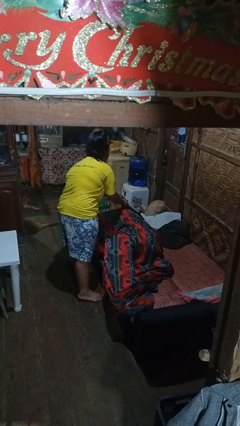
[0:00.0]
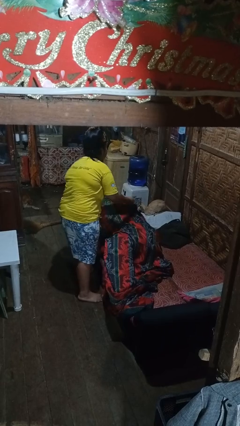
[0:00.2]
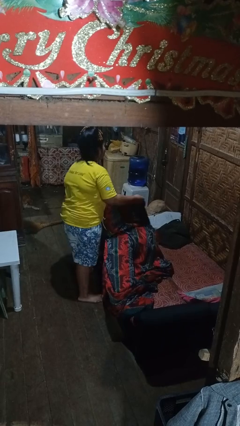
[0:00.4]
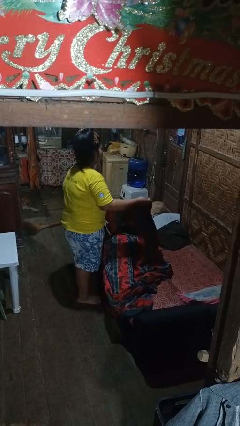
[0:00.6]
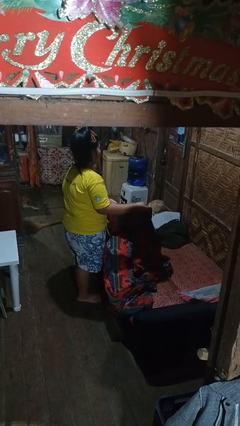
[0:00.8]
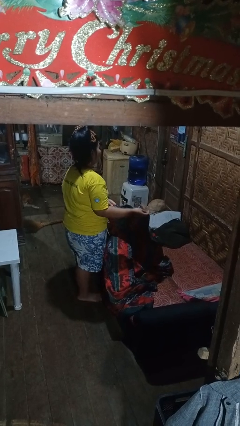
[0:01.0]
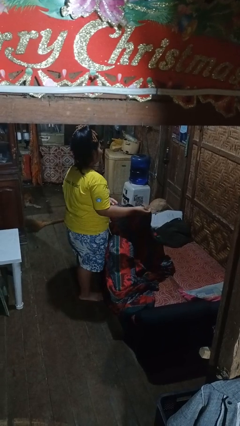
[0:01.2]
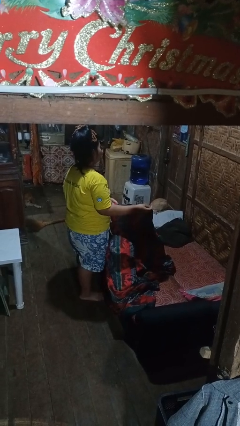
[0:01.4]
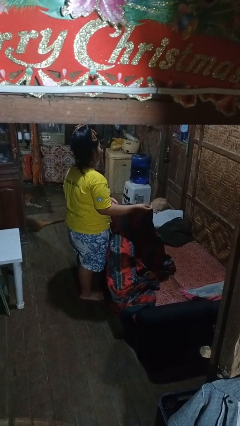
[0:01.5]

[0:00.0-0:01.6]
person uncovers friend with blanket

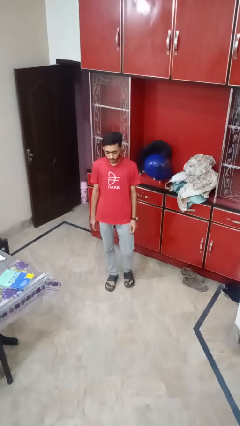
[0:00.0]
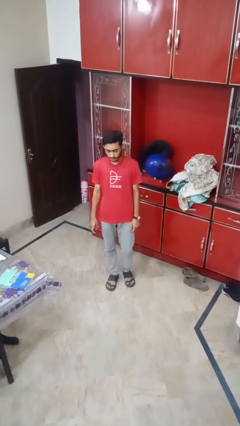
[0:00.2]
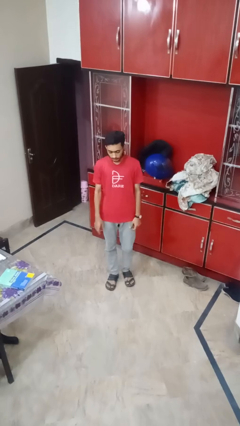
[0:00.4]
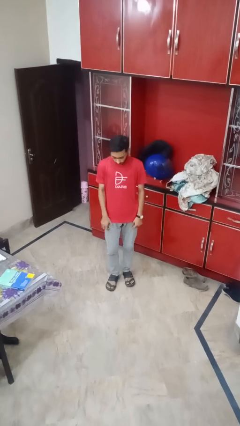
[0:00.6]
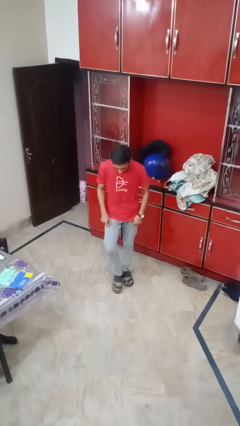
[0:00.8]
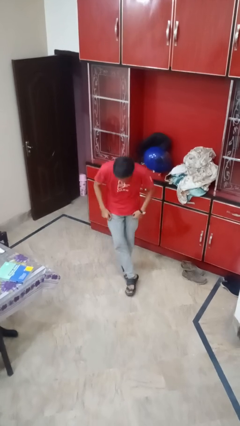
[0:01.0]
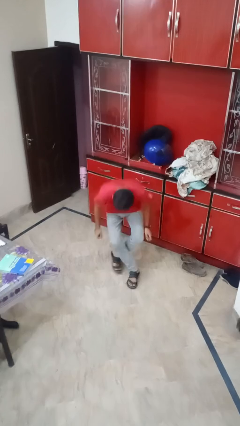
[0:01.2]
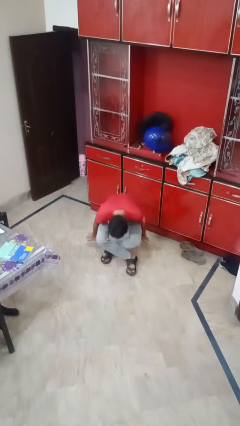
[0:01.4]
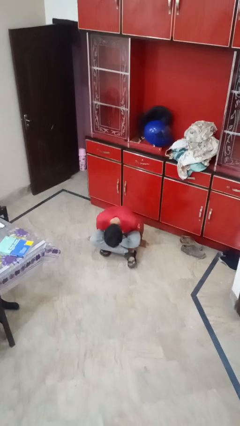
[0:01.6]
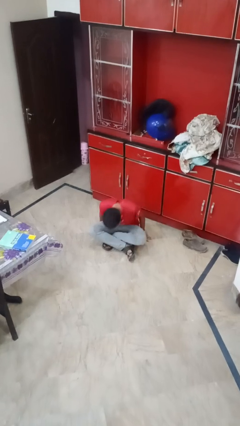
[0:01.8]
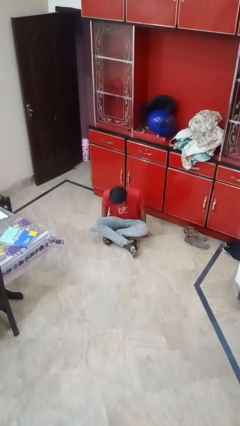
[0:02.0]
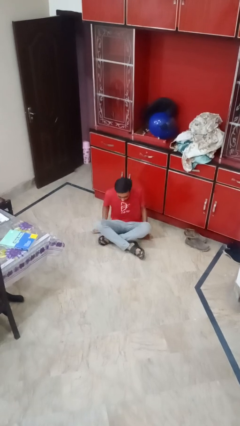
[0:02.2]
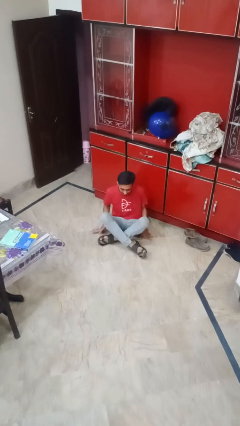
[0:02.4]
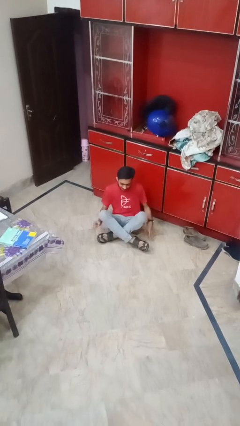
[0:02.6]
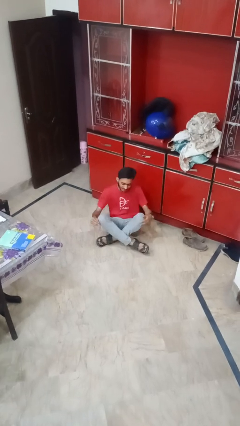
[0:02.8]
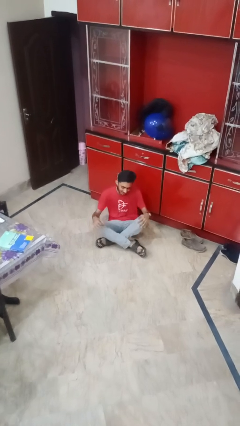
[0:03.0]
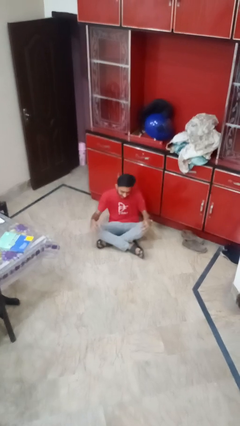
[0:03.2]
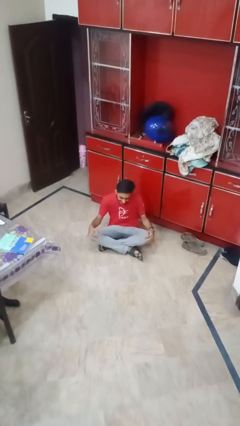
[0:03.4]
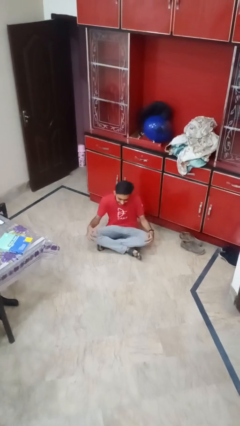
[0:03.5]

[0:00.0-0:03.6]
person sits crisscross

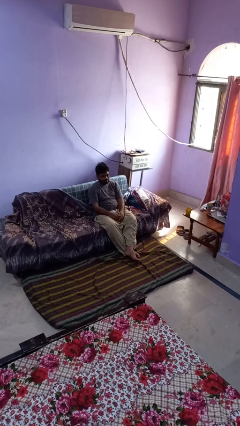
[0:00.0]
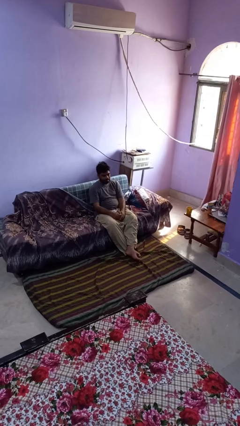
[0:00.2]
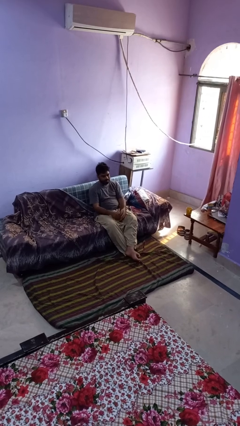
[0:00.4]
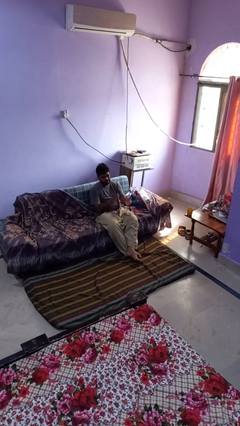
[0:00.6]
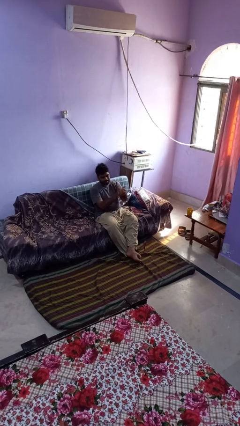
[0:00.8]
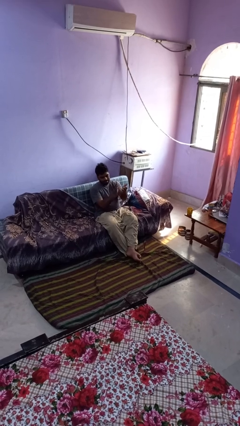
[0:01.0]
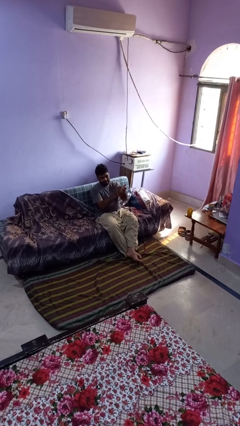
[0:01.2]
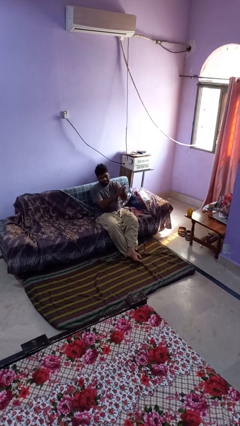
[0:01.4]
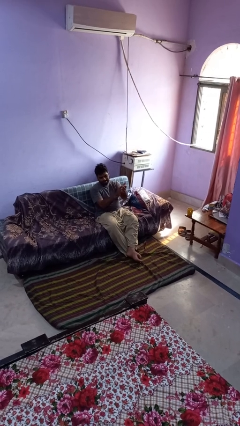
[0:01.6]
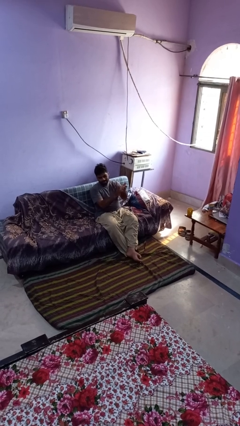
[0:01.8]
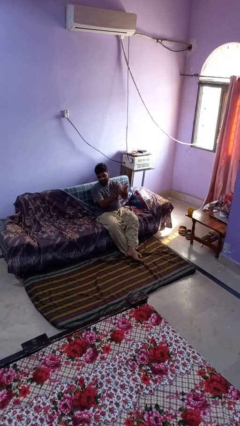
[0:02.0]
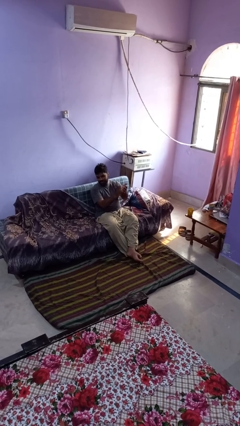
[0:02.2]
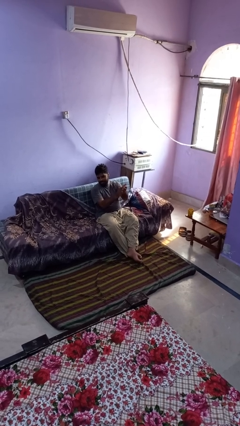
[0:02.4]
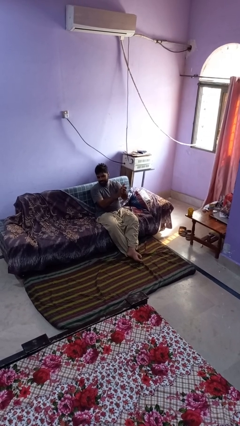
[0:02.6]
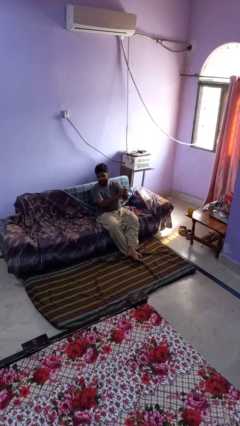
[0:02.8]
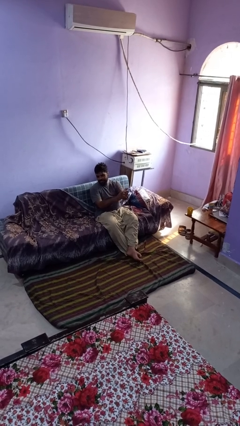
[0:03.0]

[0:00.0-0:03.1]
person claps hands

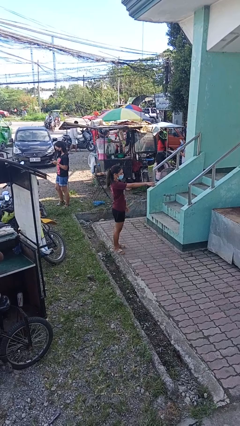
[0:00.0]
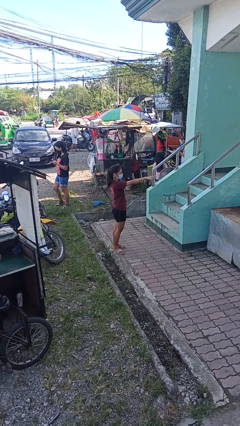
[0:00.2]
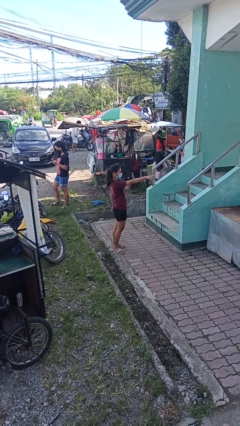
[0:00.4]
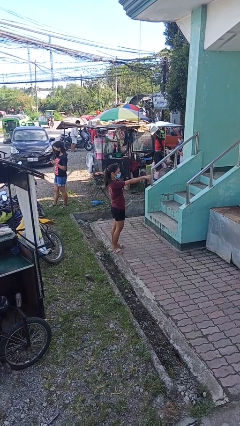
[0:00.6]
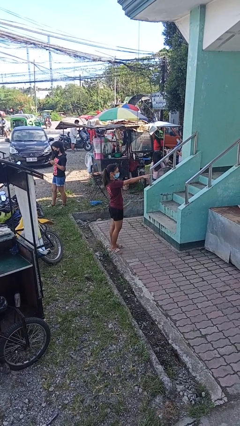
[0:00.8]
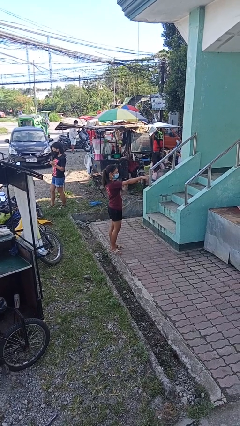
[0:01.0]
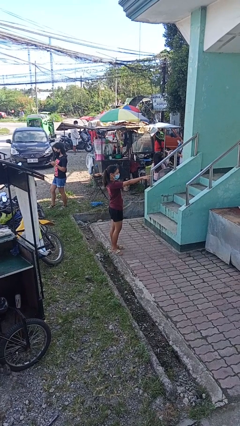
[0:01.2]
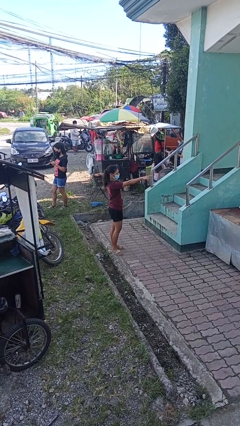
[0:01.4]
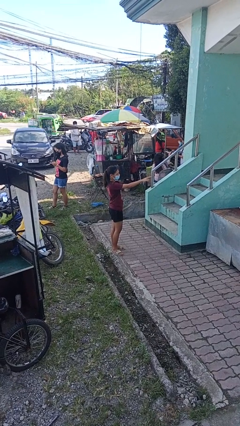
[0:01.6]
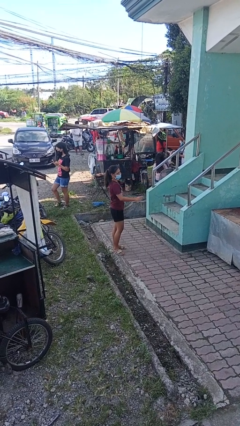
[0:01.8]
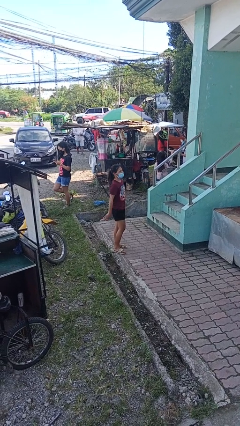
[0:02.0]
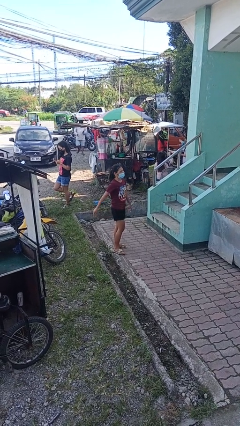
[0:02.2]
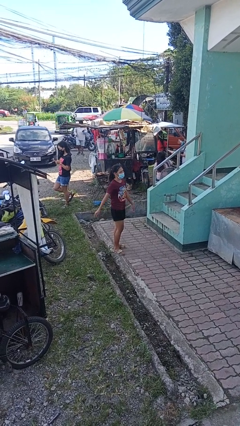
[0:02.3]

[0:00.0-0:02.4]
person points at person

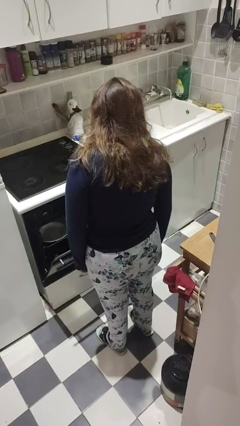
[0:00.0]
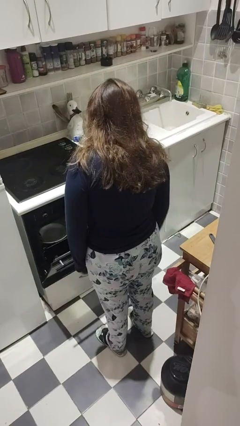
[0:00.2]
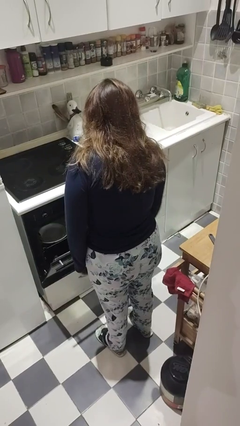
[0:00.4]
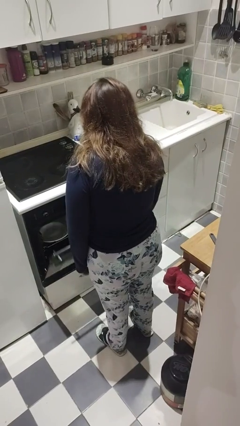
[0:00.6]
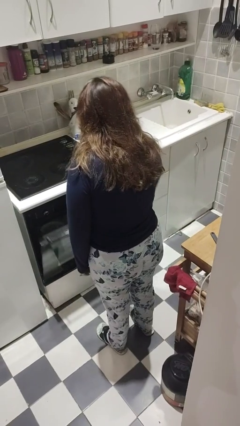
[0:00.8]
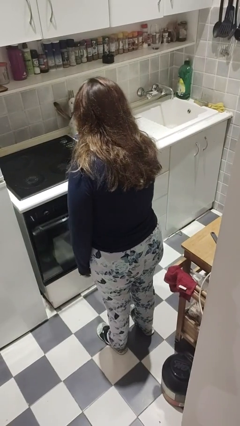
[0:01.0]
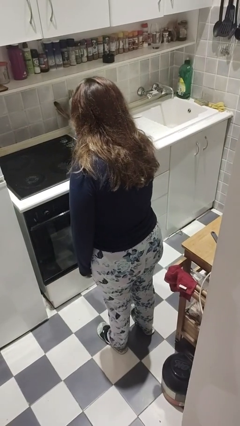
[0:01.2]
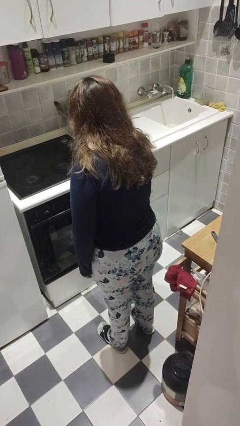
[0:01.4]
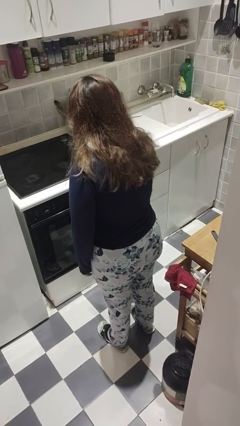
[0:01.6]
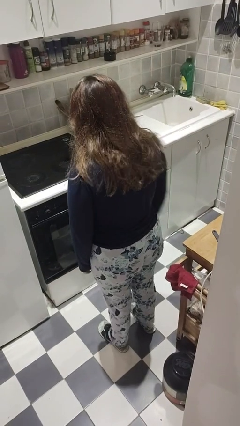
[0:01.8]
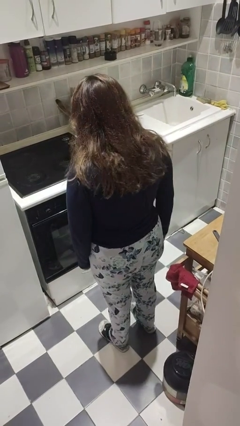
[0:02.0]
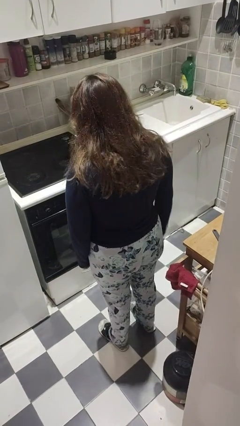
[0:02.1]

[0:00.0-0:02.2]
person closes dishwasher

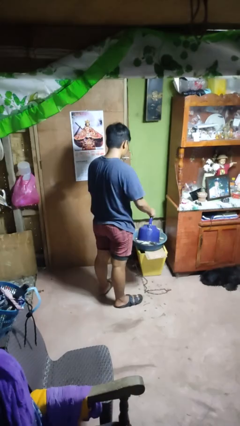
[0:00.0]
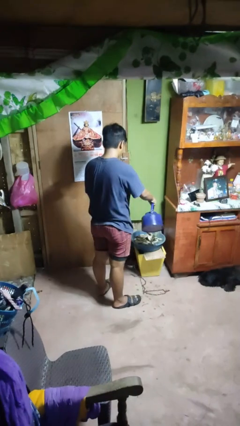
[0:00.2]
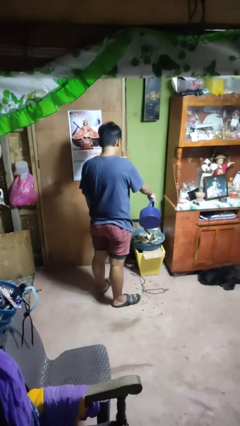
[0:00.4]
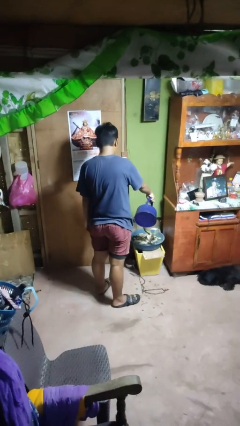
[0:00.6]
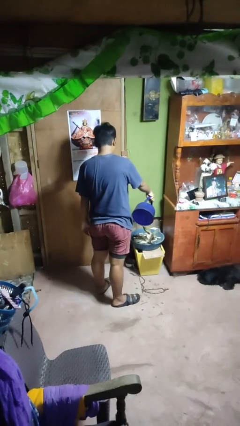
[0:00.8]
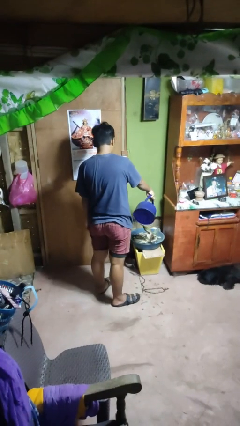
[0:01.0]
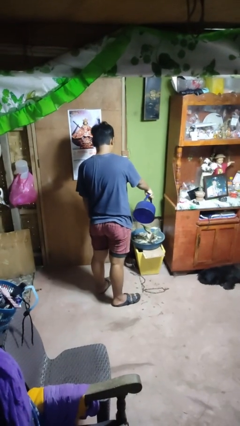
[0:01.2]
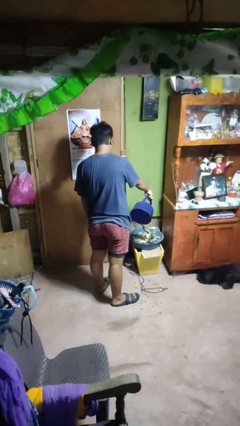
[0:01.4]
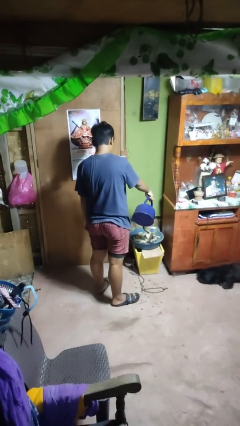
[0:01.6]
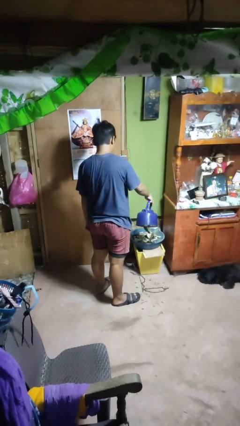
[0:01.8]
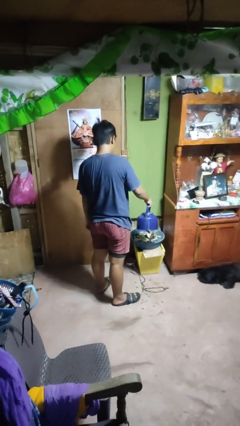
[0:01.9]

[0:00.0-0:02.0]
person waters houseplant

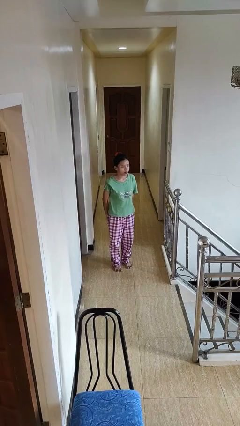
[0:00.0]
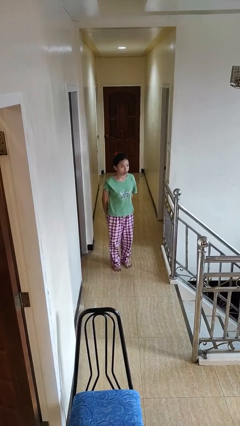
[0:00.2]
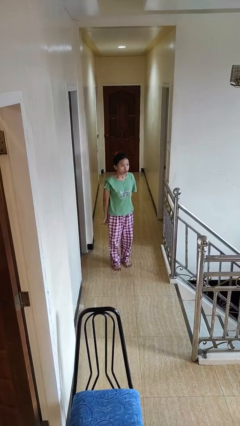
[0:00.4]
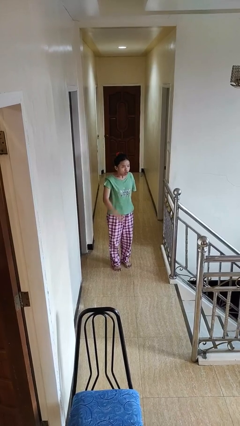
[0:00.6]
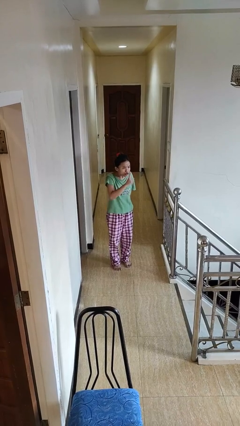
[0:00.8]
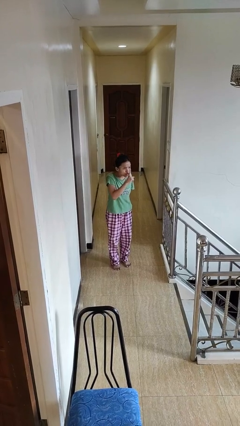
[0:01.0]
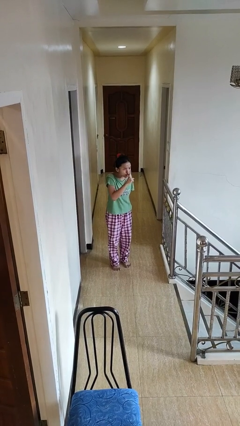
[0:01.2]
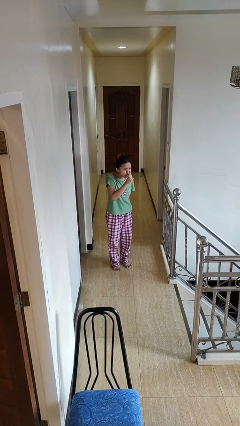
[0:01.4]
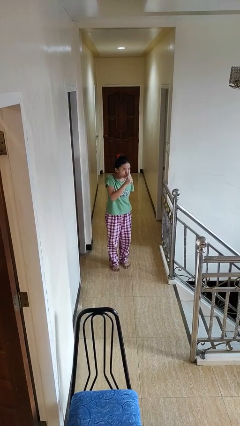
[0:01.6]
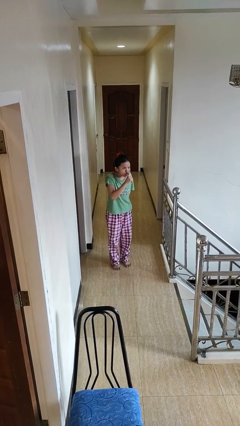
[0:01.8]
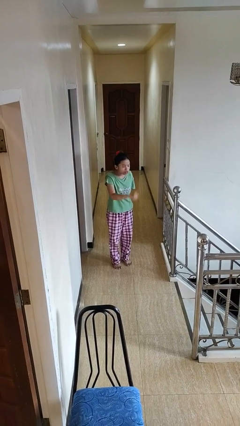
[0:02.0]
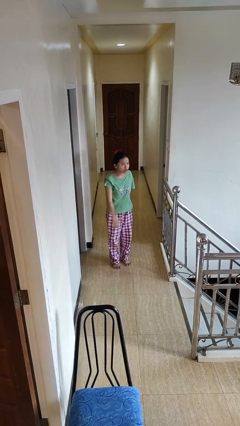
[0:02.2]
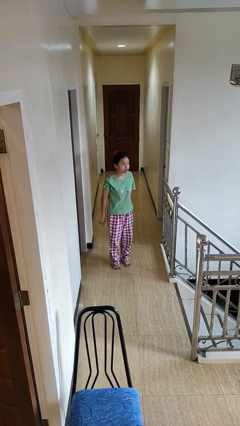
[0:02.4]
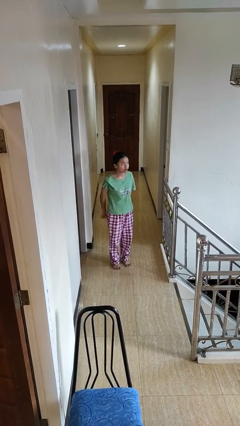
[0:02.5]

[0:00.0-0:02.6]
person gestures be quiet

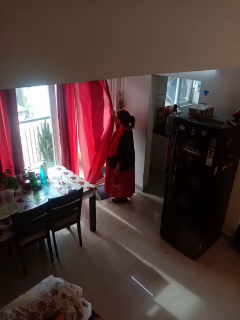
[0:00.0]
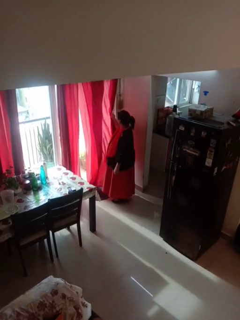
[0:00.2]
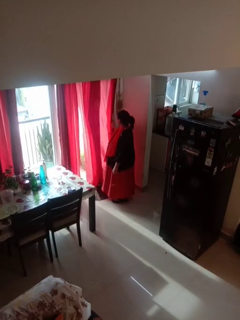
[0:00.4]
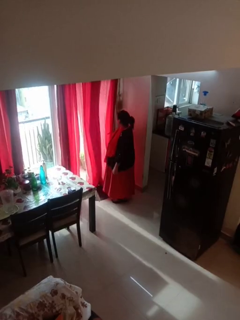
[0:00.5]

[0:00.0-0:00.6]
person closes curtains
